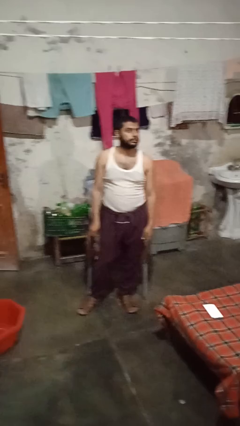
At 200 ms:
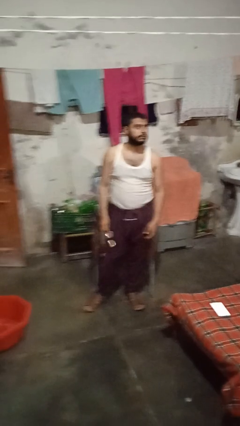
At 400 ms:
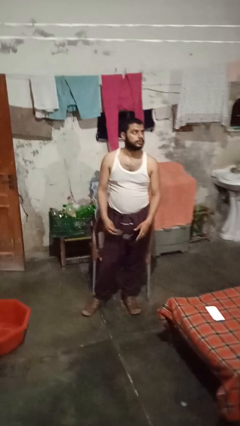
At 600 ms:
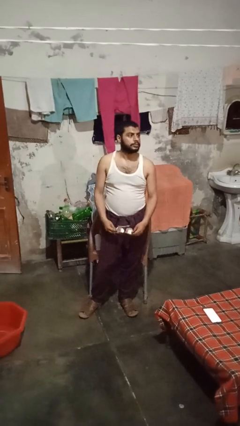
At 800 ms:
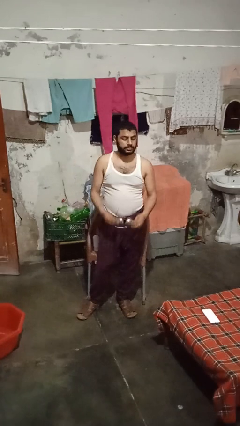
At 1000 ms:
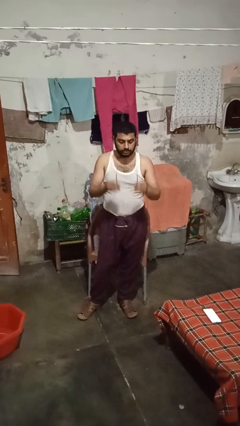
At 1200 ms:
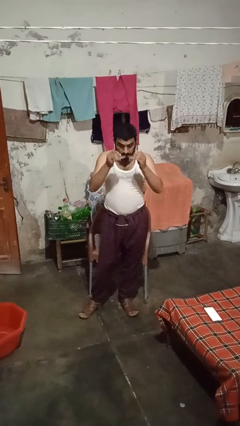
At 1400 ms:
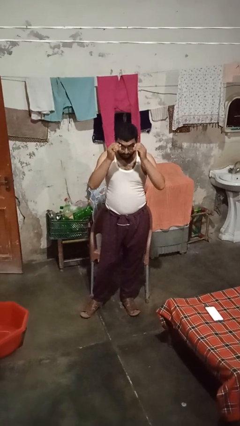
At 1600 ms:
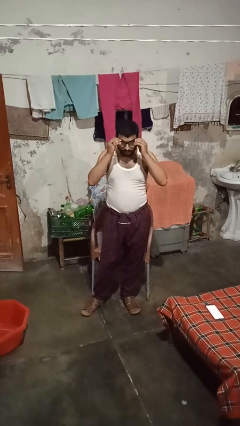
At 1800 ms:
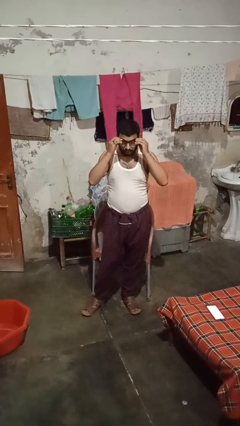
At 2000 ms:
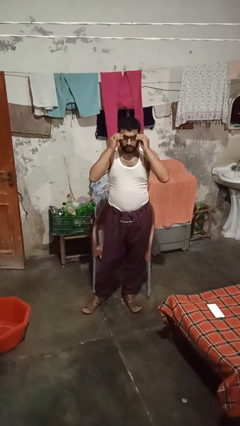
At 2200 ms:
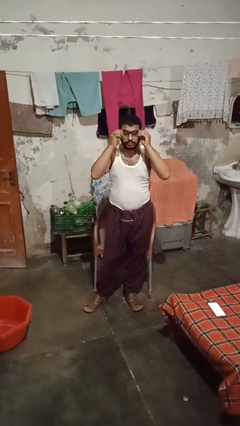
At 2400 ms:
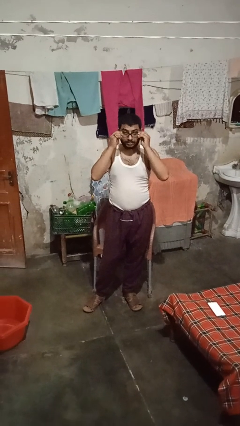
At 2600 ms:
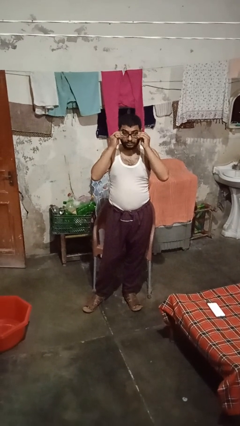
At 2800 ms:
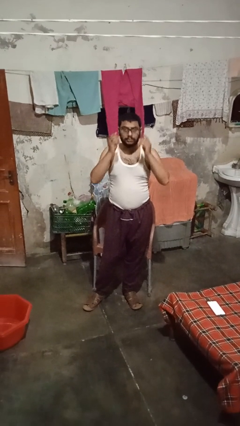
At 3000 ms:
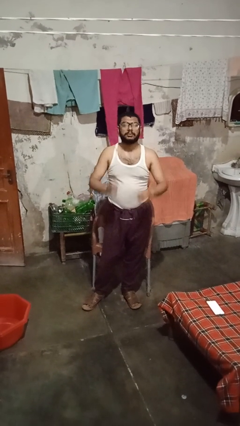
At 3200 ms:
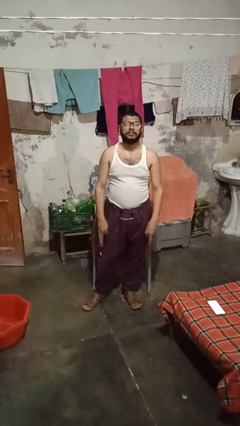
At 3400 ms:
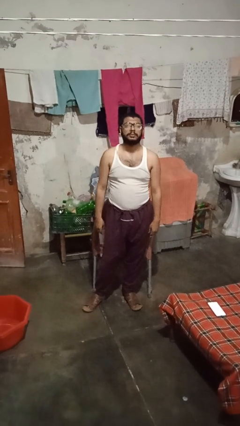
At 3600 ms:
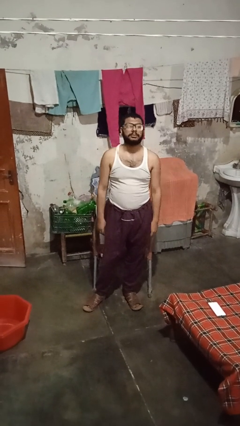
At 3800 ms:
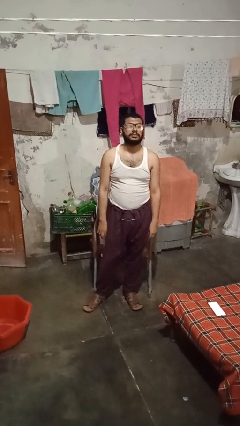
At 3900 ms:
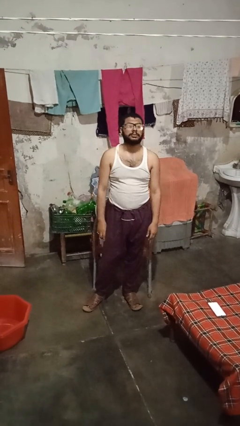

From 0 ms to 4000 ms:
person puts on glasses

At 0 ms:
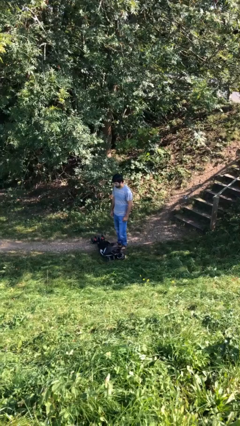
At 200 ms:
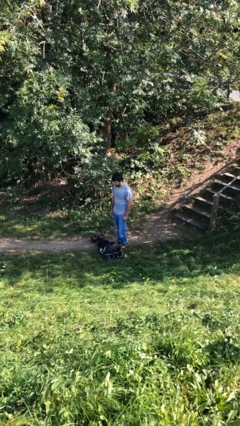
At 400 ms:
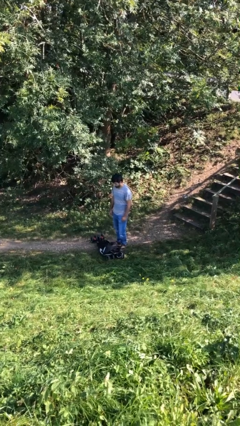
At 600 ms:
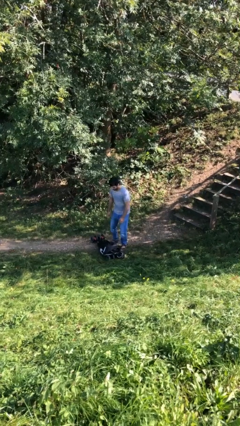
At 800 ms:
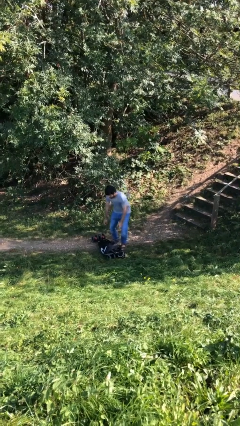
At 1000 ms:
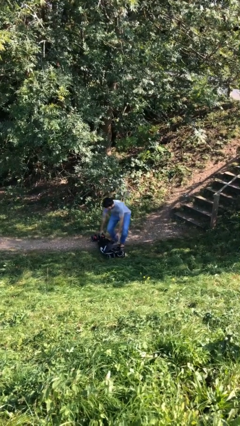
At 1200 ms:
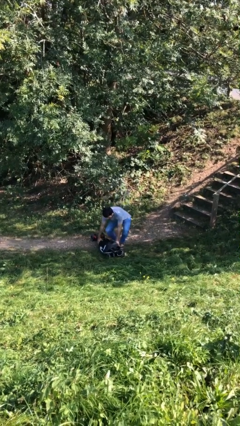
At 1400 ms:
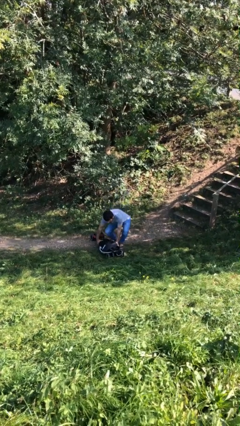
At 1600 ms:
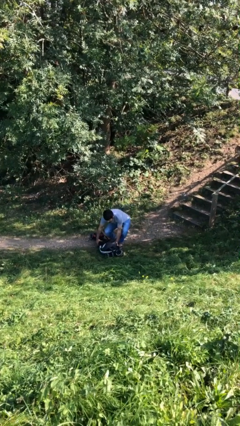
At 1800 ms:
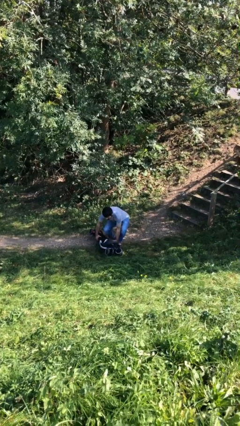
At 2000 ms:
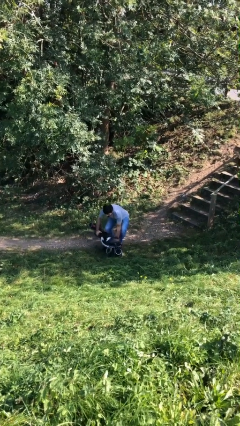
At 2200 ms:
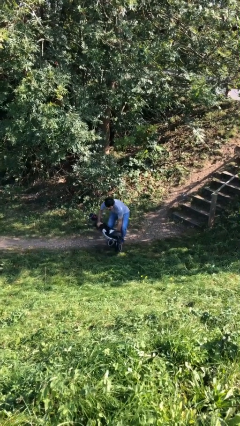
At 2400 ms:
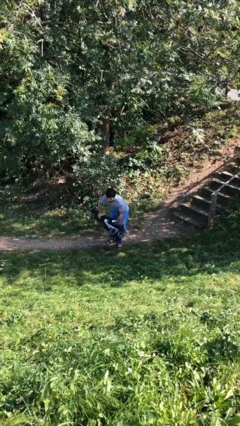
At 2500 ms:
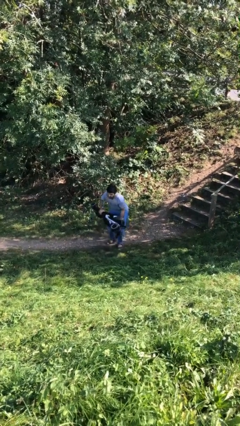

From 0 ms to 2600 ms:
person picks up object from floor

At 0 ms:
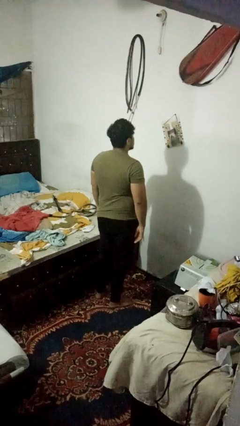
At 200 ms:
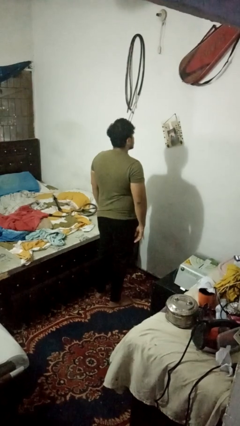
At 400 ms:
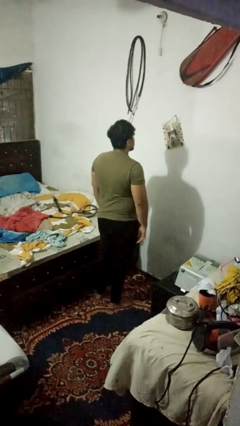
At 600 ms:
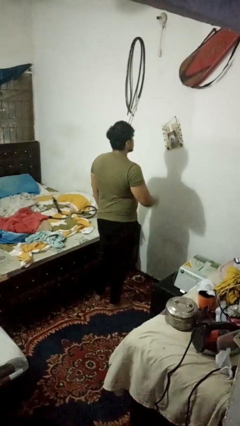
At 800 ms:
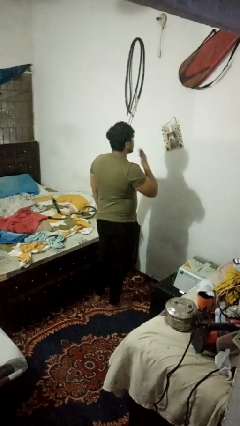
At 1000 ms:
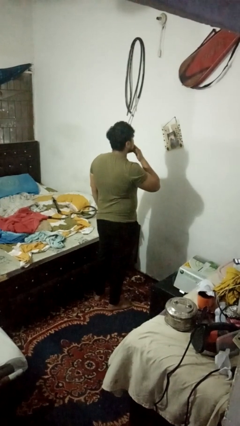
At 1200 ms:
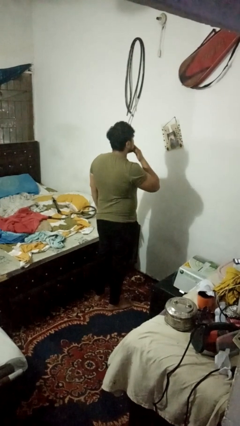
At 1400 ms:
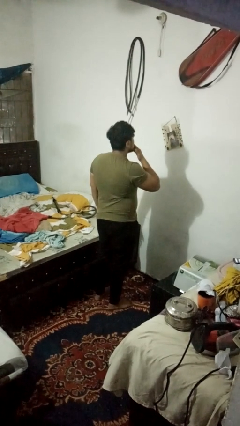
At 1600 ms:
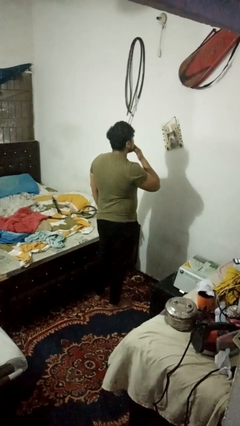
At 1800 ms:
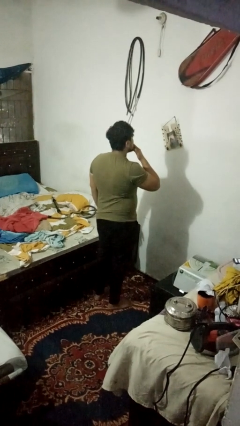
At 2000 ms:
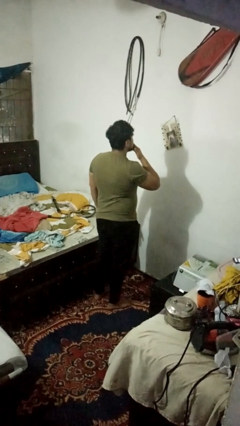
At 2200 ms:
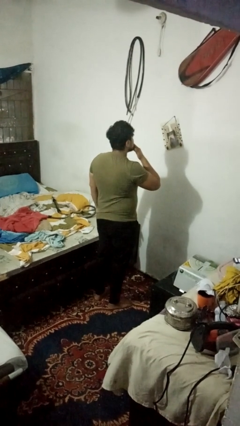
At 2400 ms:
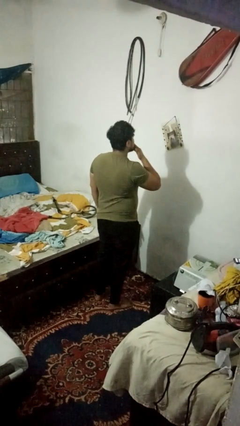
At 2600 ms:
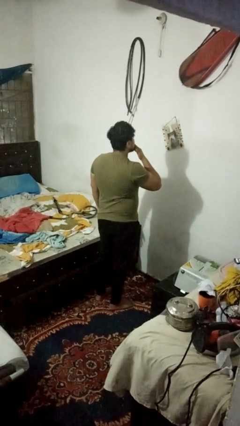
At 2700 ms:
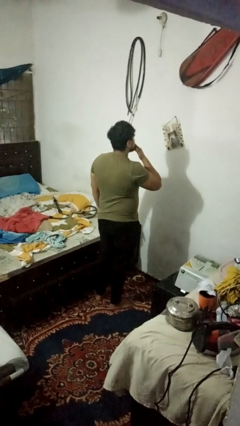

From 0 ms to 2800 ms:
person gestures blow kiss

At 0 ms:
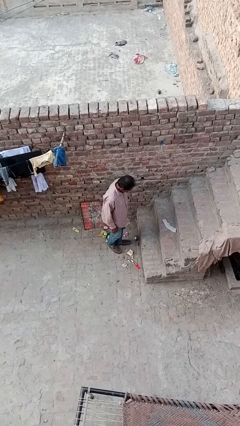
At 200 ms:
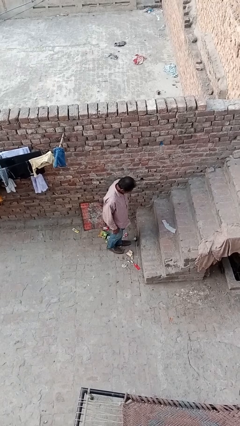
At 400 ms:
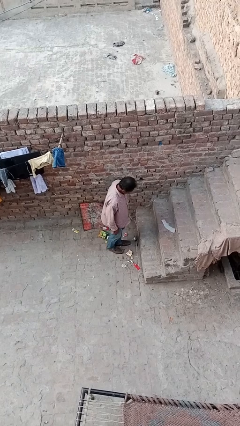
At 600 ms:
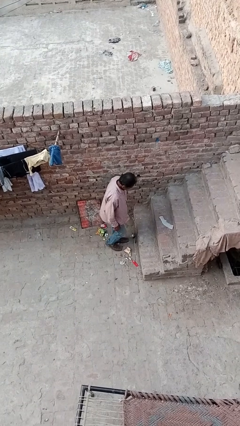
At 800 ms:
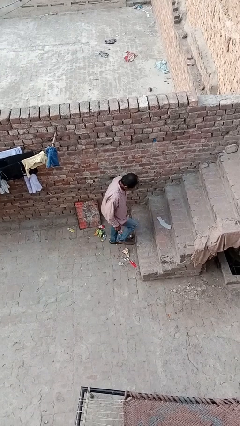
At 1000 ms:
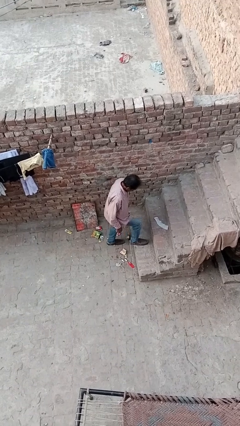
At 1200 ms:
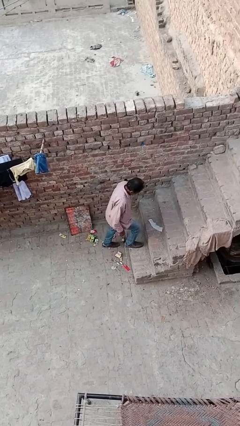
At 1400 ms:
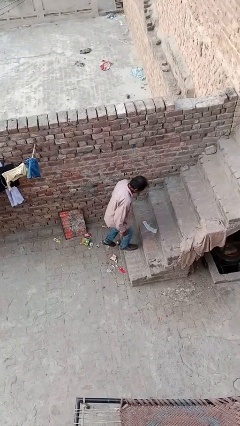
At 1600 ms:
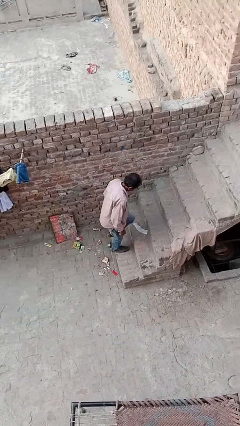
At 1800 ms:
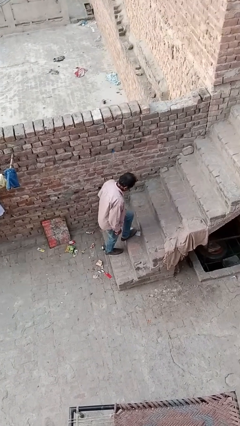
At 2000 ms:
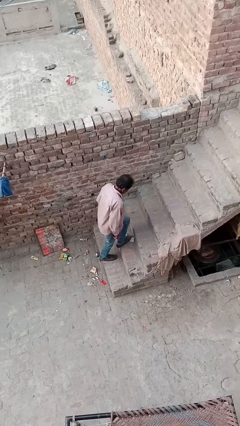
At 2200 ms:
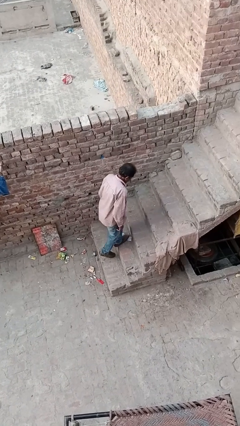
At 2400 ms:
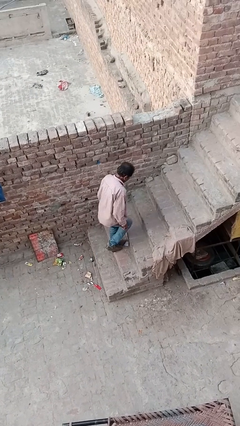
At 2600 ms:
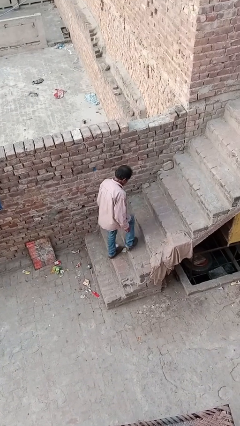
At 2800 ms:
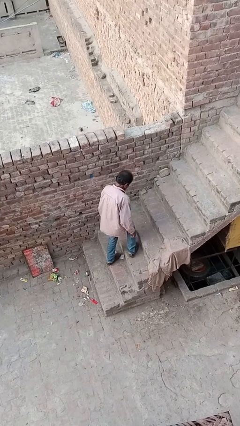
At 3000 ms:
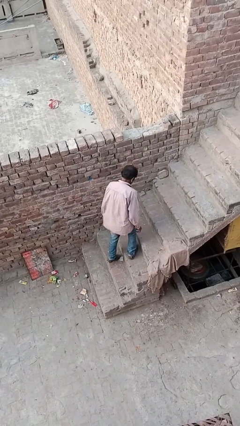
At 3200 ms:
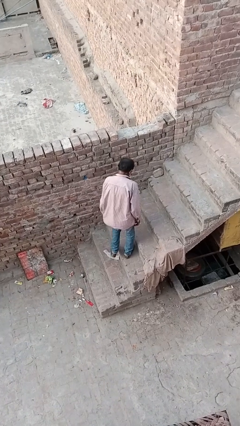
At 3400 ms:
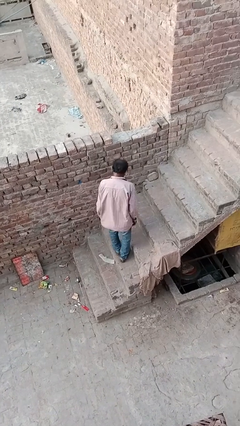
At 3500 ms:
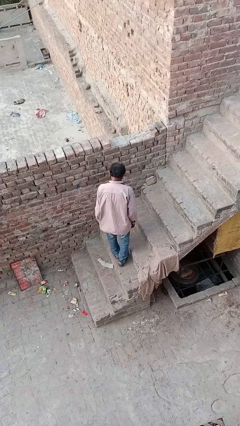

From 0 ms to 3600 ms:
person climbs up stairs

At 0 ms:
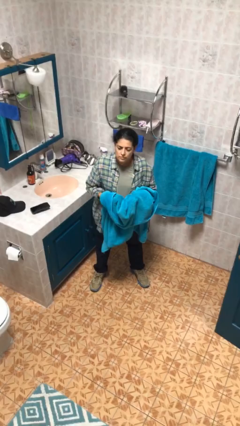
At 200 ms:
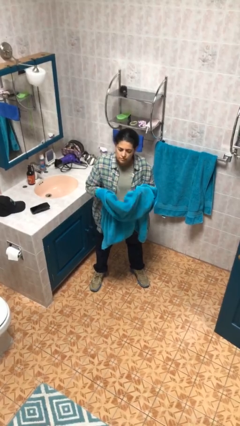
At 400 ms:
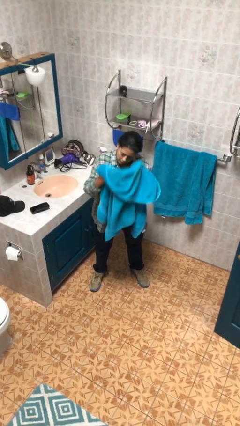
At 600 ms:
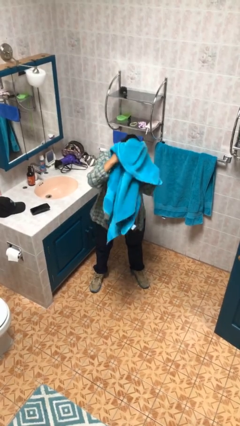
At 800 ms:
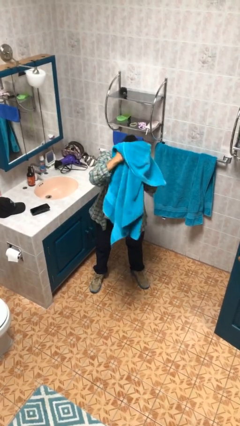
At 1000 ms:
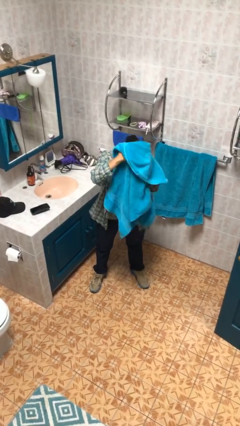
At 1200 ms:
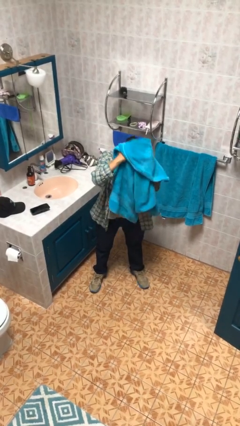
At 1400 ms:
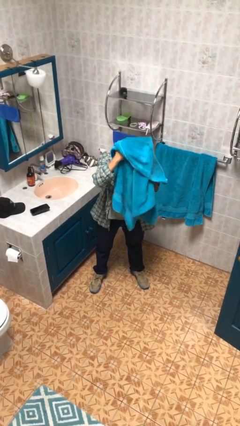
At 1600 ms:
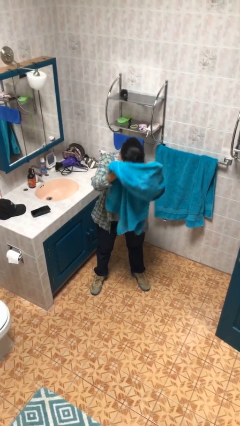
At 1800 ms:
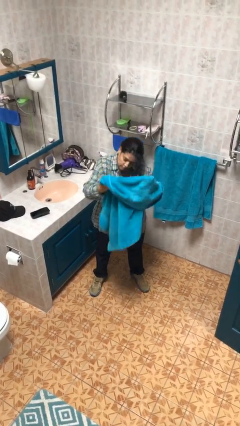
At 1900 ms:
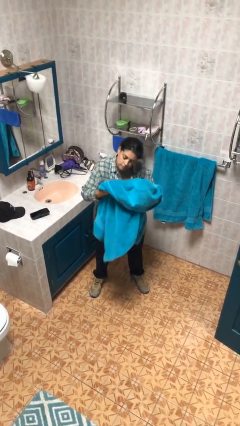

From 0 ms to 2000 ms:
person dries hair with towel

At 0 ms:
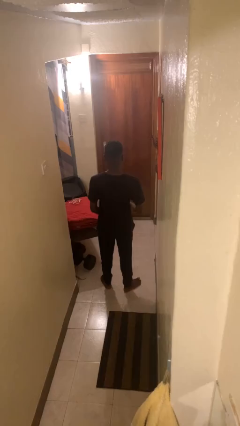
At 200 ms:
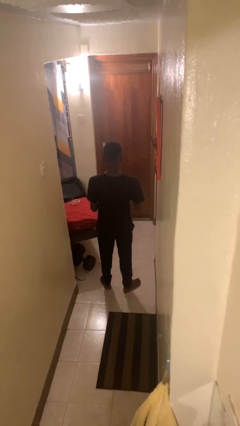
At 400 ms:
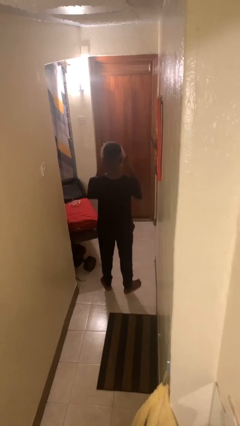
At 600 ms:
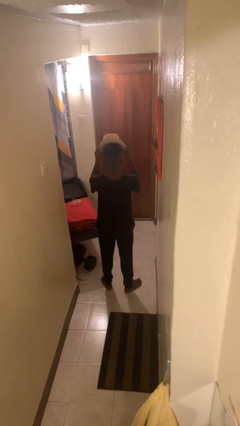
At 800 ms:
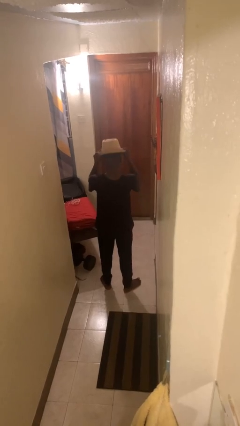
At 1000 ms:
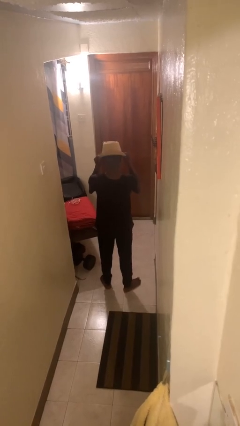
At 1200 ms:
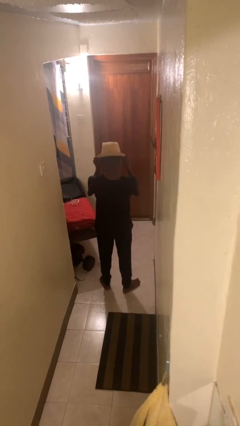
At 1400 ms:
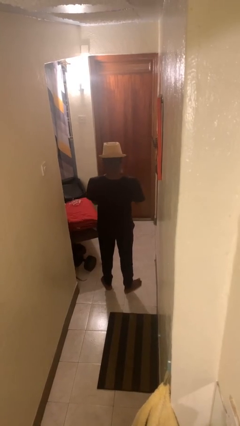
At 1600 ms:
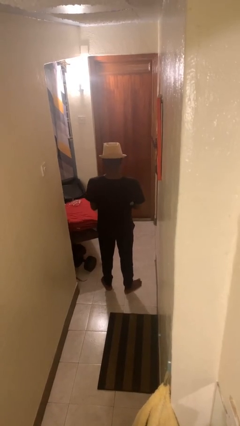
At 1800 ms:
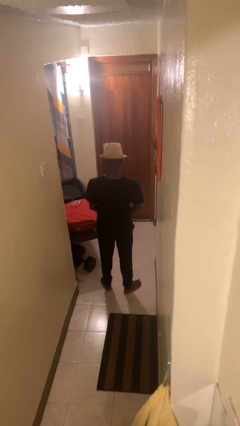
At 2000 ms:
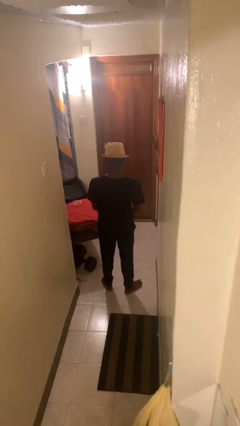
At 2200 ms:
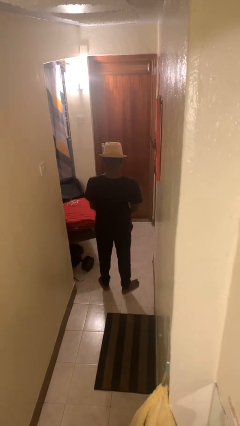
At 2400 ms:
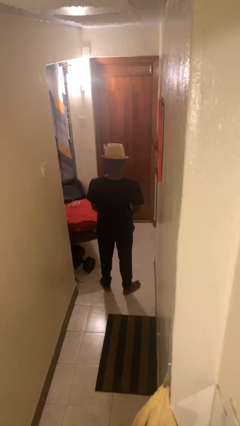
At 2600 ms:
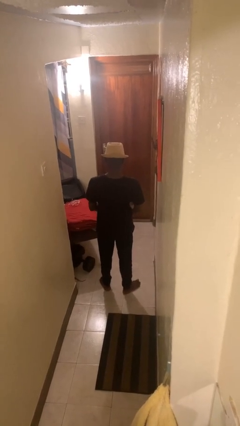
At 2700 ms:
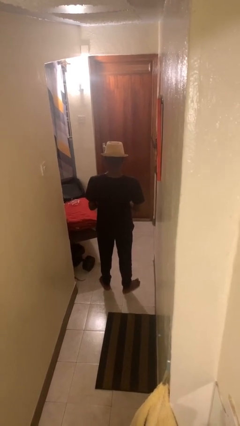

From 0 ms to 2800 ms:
person puts on hat
